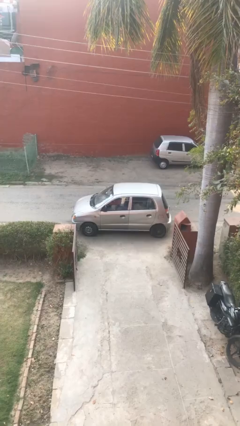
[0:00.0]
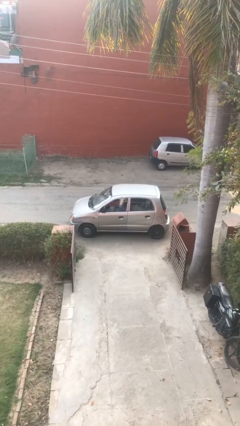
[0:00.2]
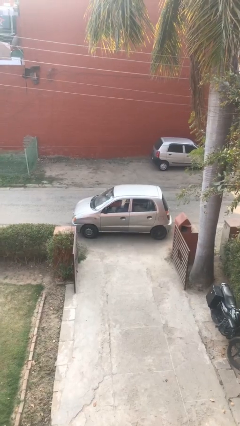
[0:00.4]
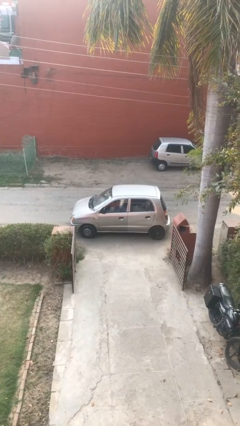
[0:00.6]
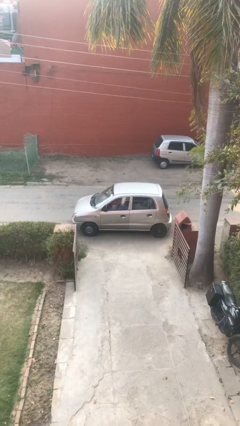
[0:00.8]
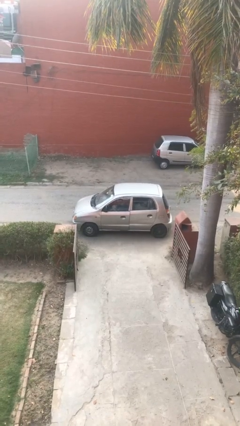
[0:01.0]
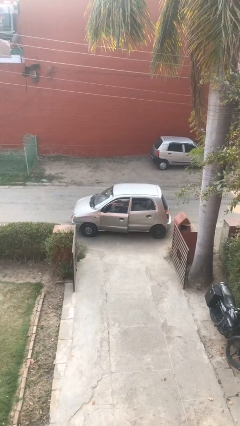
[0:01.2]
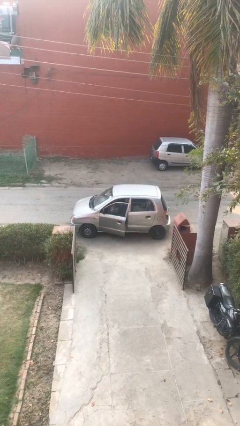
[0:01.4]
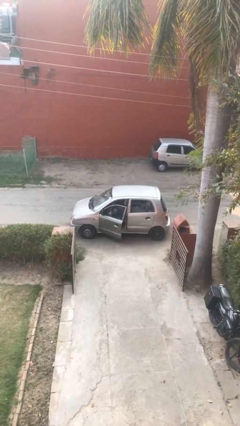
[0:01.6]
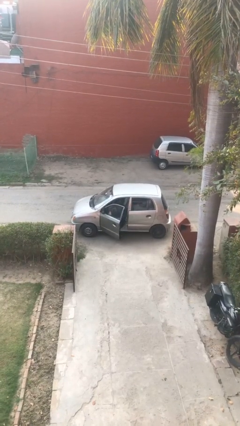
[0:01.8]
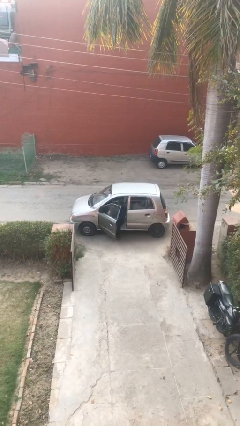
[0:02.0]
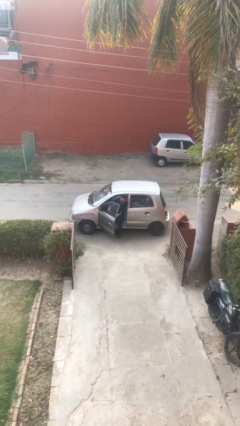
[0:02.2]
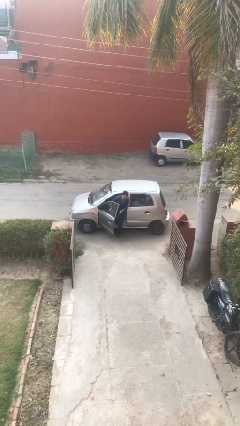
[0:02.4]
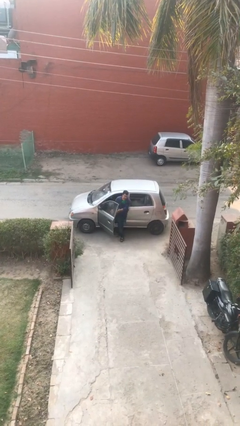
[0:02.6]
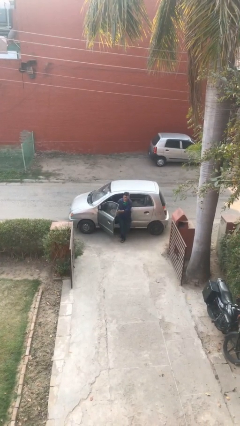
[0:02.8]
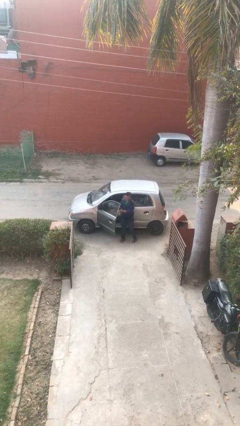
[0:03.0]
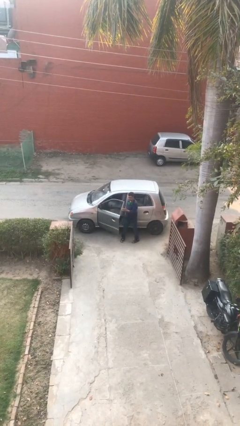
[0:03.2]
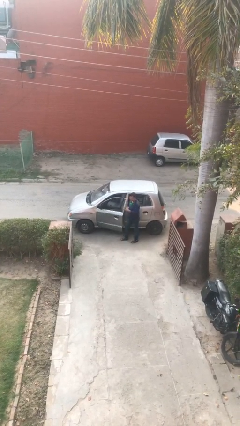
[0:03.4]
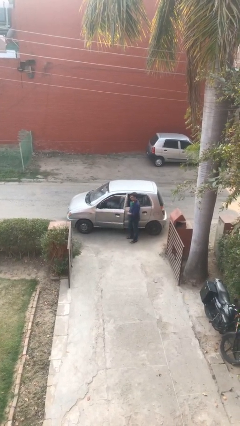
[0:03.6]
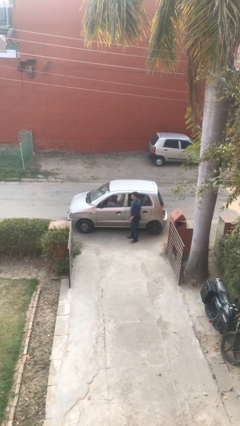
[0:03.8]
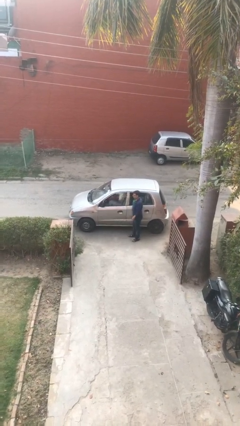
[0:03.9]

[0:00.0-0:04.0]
car drops off person

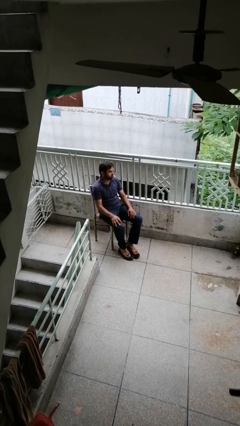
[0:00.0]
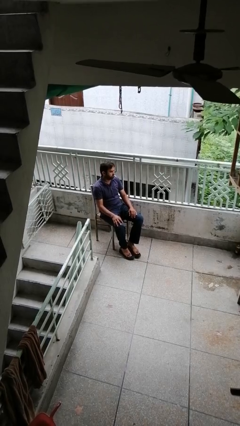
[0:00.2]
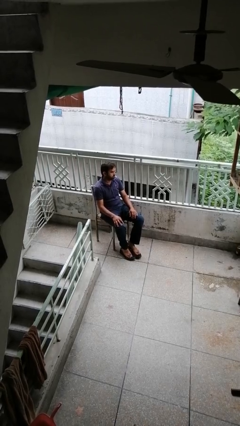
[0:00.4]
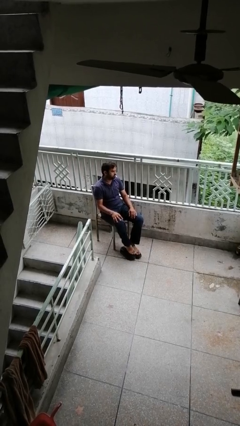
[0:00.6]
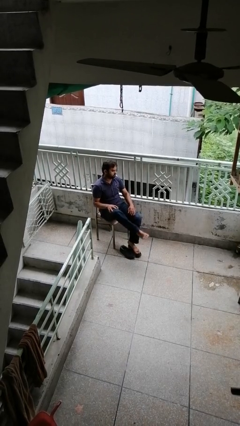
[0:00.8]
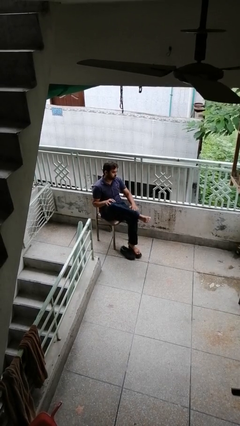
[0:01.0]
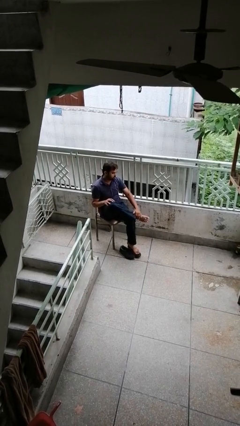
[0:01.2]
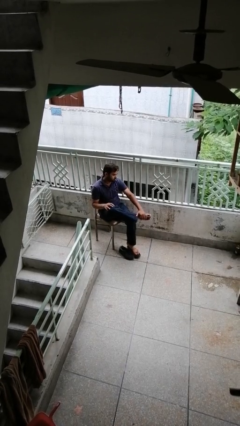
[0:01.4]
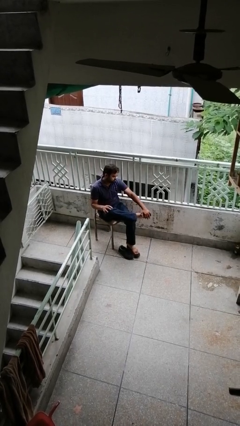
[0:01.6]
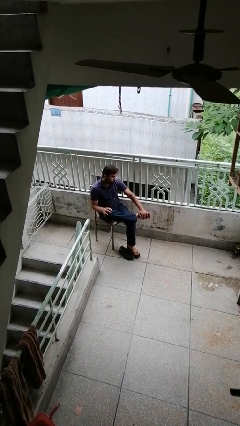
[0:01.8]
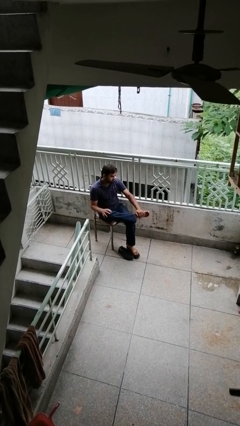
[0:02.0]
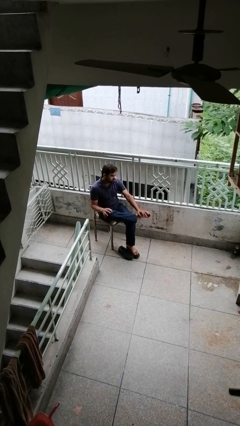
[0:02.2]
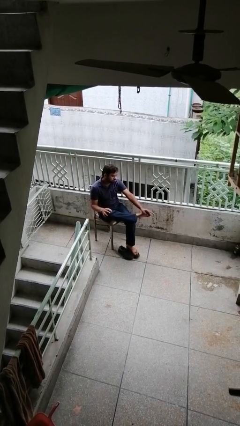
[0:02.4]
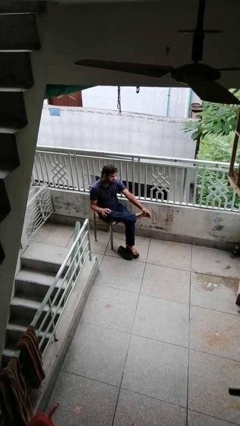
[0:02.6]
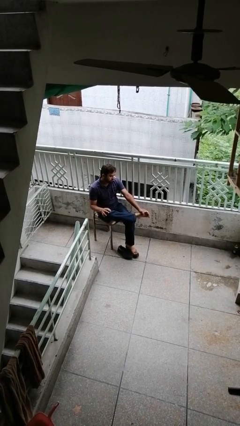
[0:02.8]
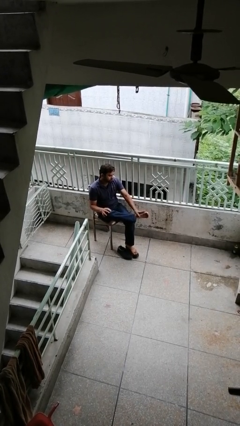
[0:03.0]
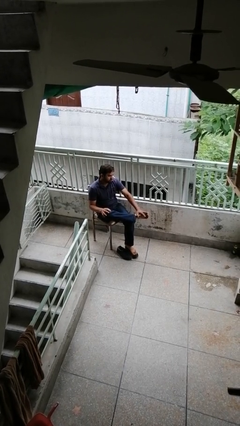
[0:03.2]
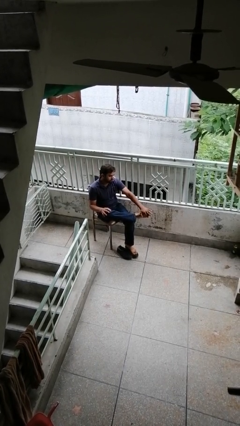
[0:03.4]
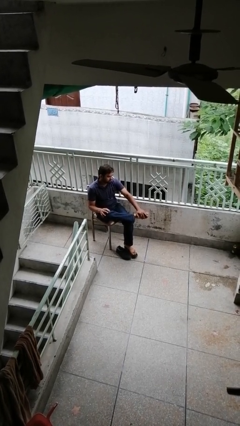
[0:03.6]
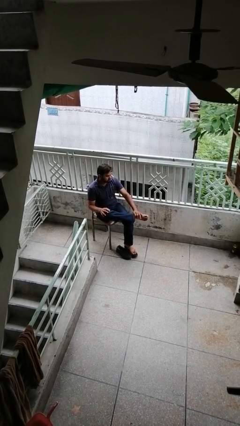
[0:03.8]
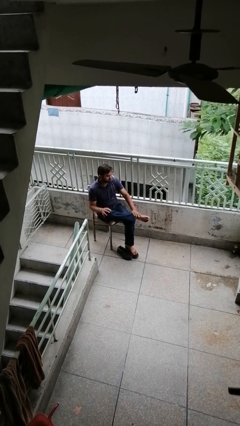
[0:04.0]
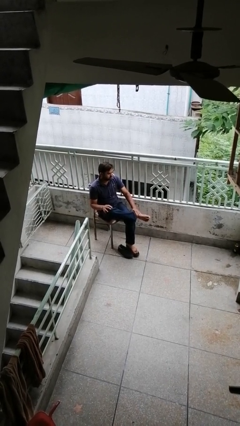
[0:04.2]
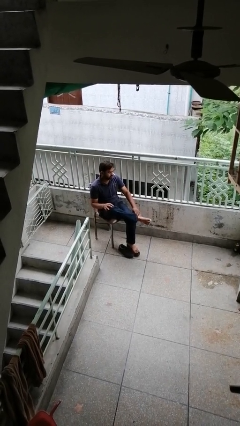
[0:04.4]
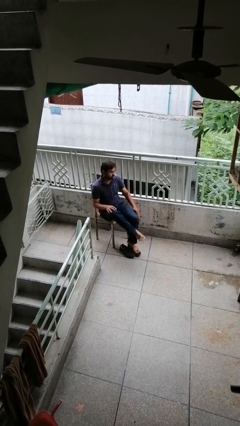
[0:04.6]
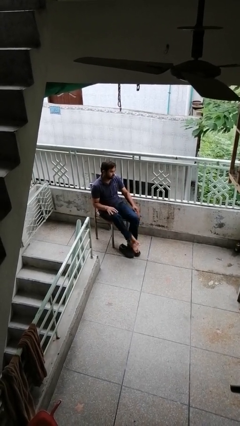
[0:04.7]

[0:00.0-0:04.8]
person rubs foot

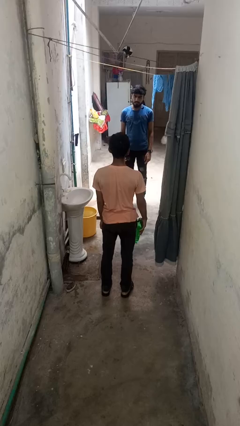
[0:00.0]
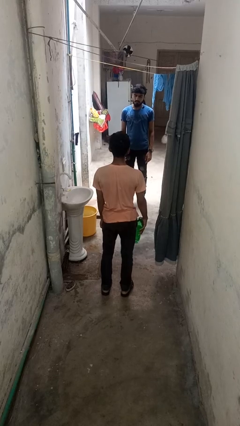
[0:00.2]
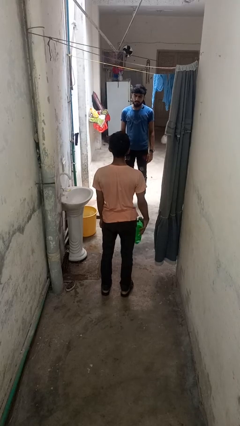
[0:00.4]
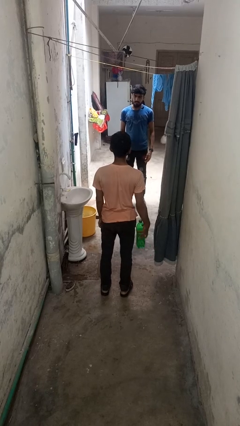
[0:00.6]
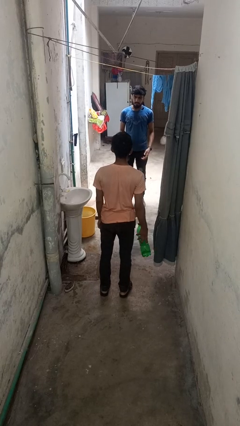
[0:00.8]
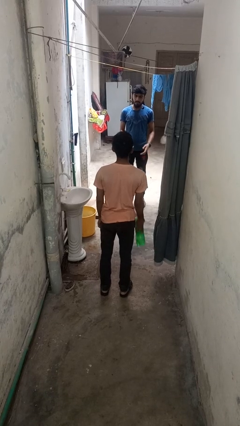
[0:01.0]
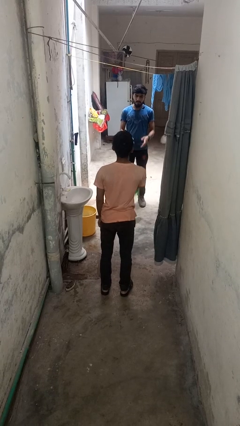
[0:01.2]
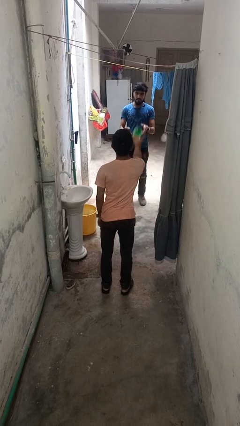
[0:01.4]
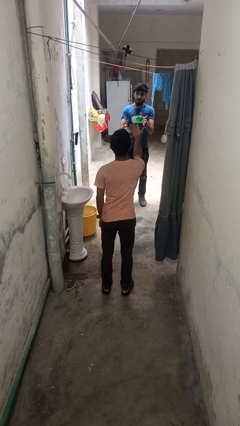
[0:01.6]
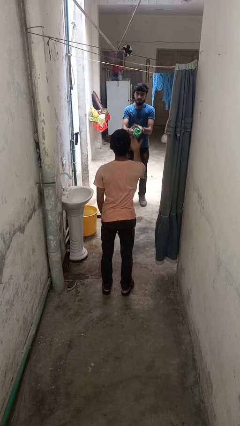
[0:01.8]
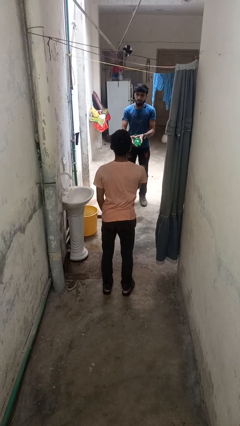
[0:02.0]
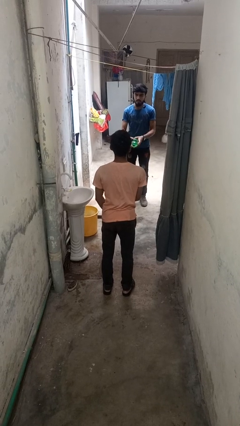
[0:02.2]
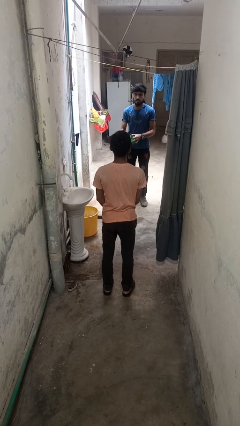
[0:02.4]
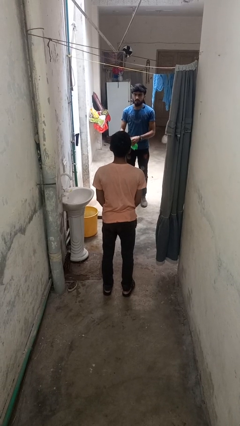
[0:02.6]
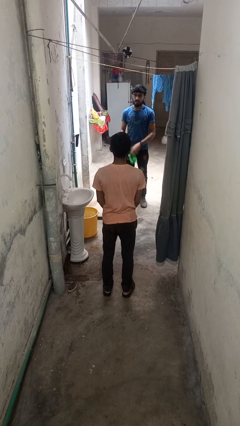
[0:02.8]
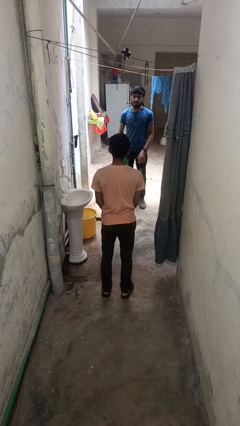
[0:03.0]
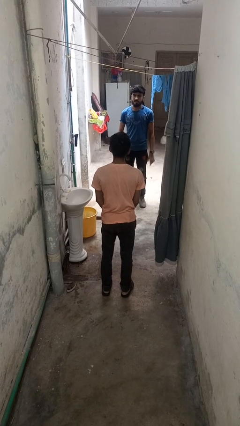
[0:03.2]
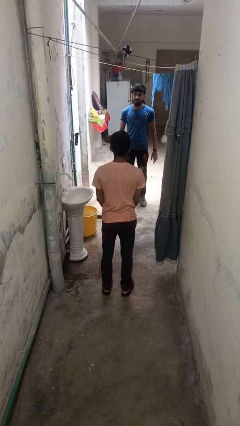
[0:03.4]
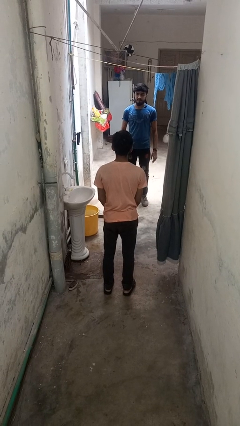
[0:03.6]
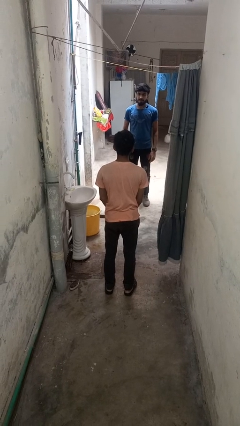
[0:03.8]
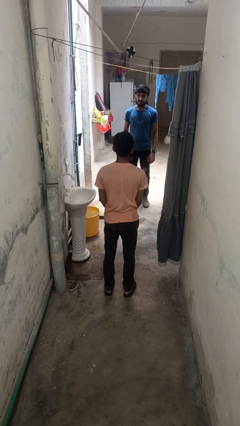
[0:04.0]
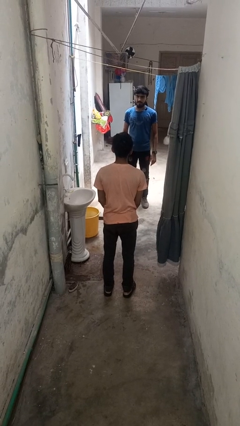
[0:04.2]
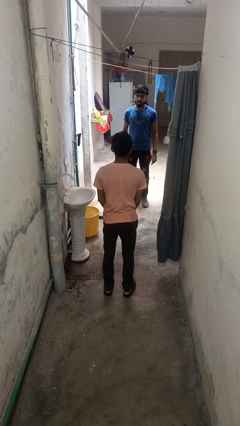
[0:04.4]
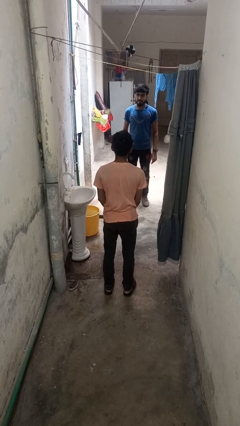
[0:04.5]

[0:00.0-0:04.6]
person throws object to person

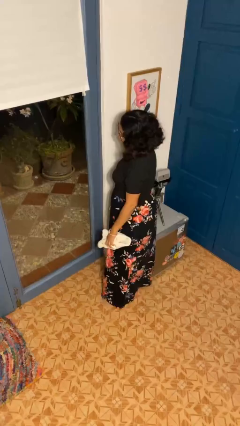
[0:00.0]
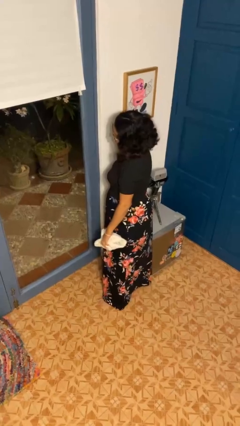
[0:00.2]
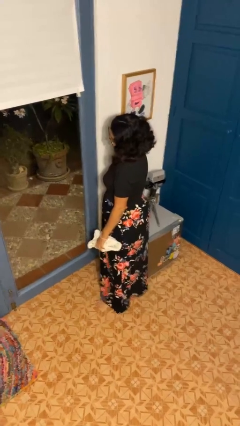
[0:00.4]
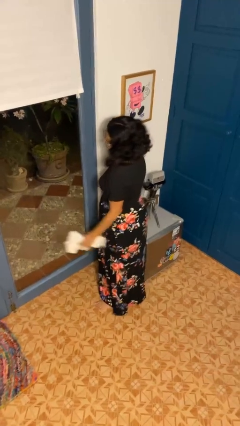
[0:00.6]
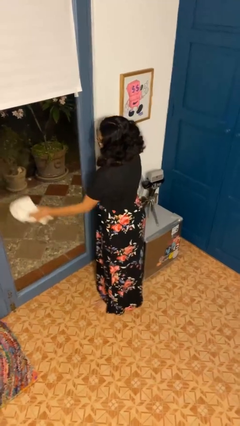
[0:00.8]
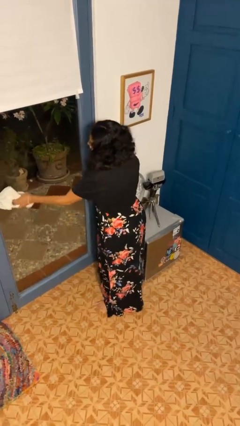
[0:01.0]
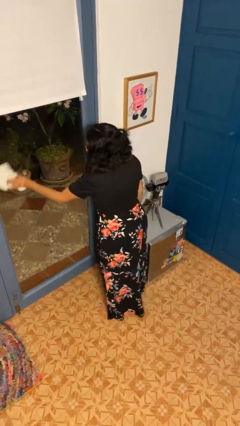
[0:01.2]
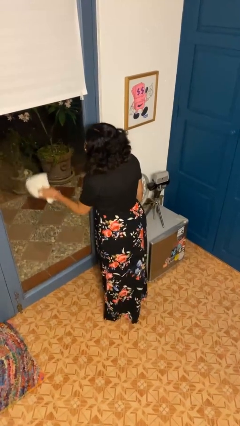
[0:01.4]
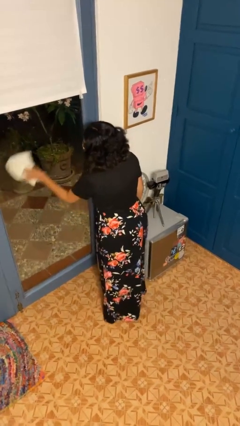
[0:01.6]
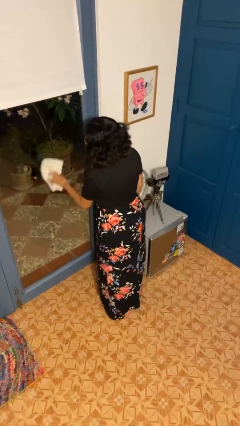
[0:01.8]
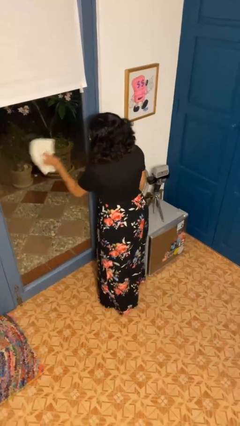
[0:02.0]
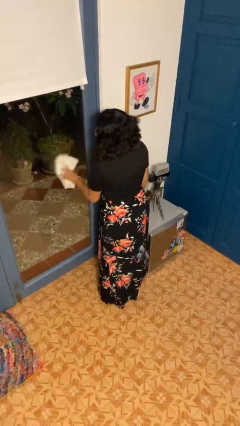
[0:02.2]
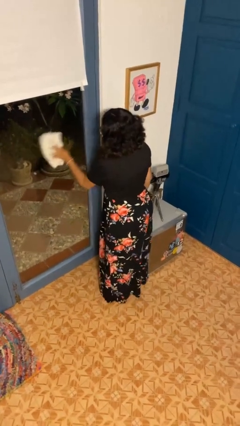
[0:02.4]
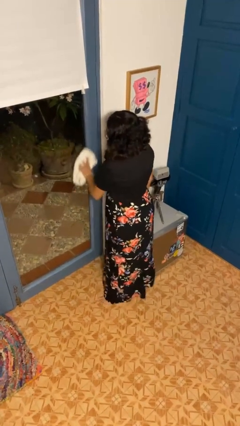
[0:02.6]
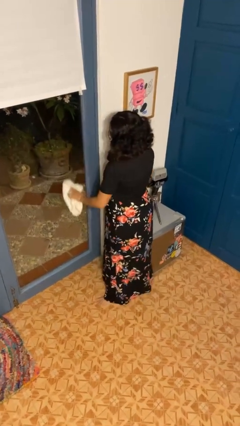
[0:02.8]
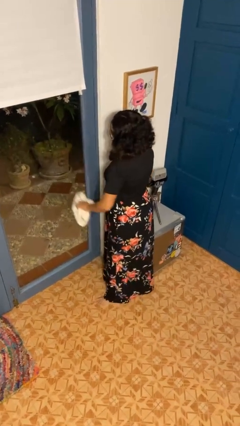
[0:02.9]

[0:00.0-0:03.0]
person washes window

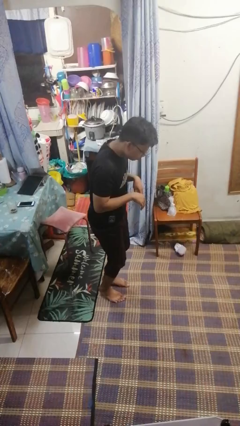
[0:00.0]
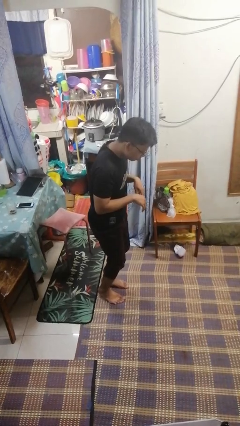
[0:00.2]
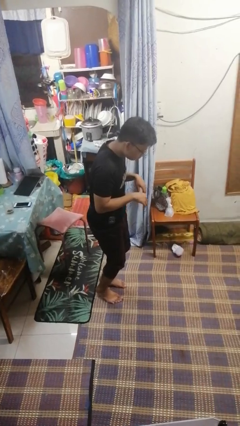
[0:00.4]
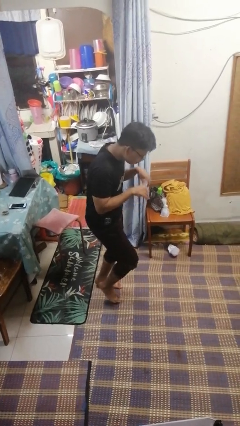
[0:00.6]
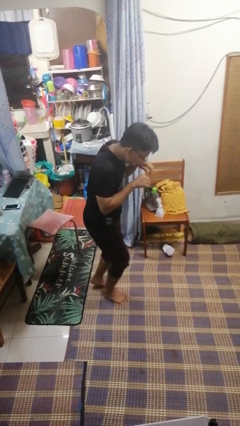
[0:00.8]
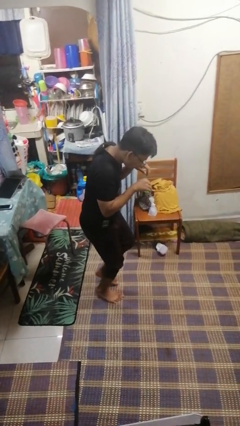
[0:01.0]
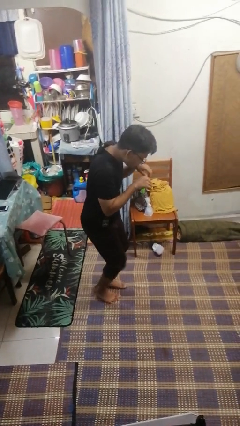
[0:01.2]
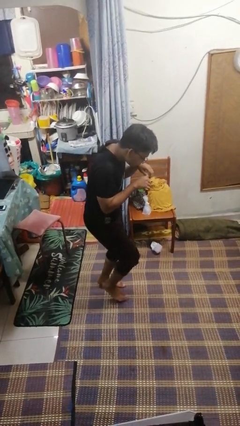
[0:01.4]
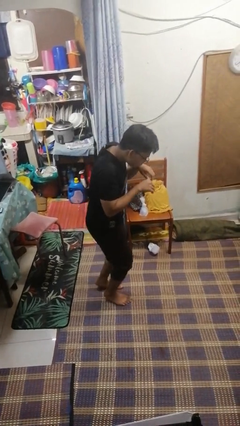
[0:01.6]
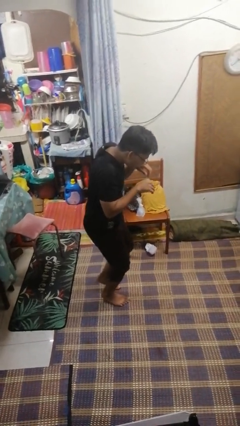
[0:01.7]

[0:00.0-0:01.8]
person walks tiptoe
